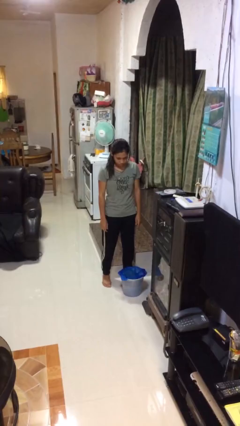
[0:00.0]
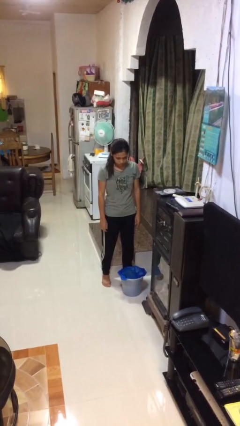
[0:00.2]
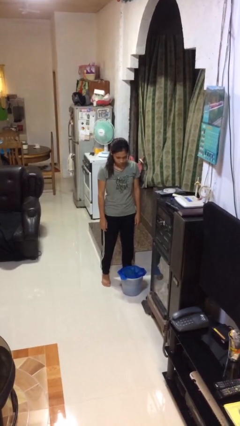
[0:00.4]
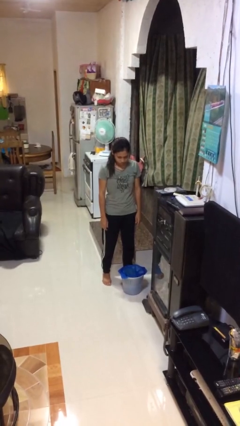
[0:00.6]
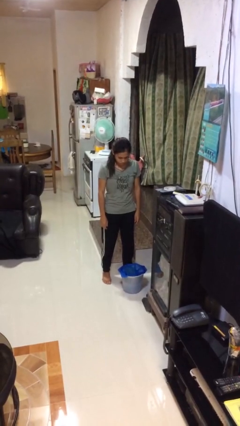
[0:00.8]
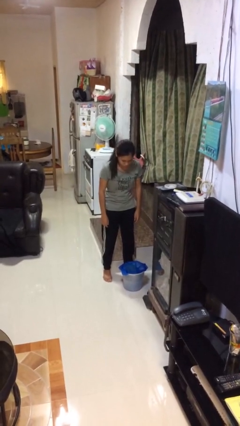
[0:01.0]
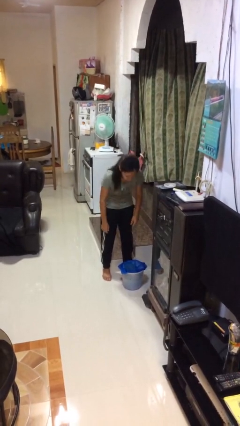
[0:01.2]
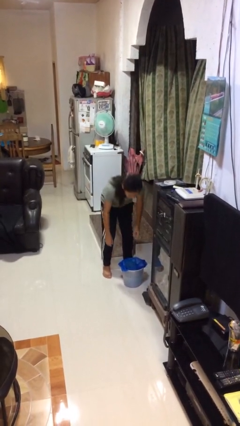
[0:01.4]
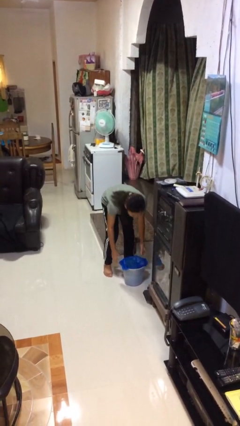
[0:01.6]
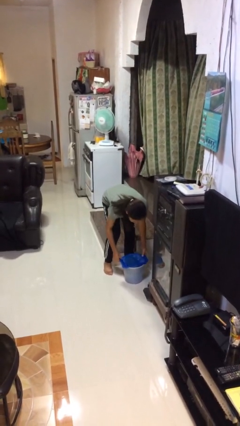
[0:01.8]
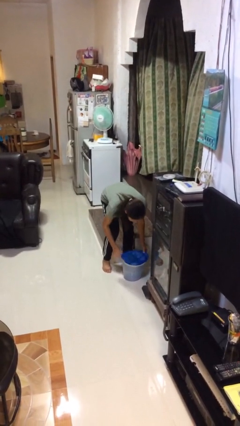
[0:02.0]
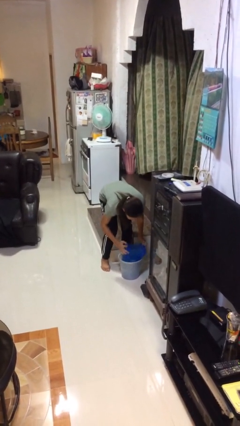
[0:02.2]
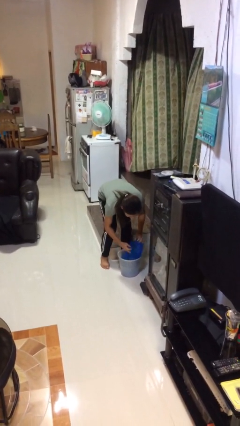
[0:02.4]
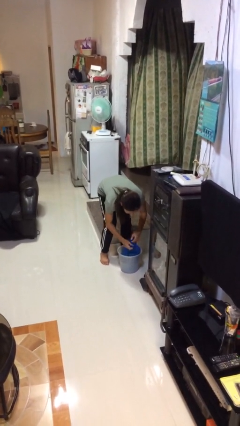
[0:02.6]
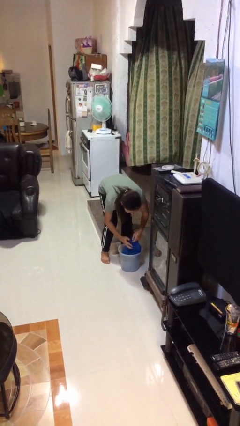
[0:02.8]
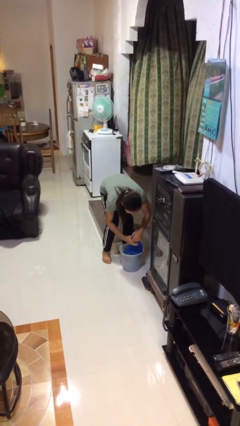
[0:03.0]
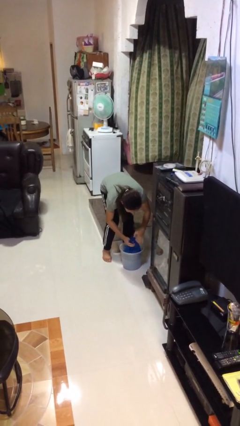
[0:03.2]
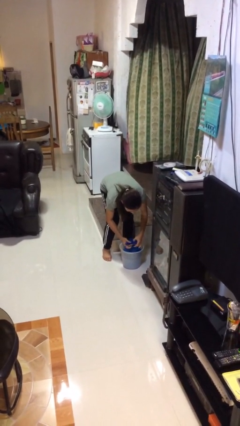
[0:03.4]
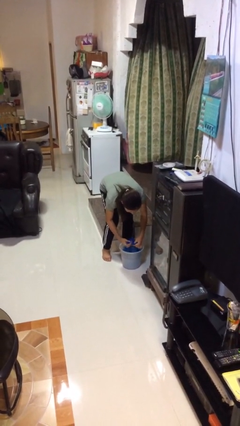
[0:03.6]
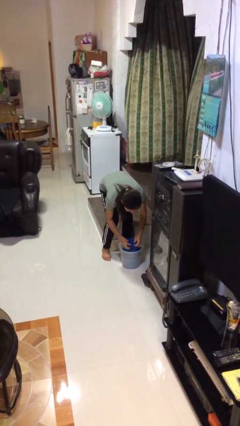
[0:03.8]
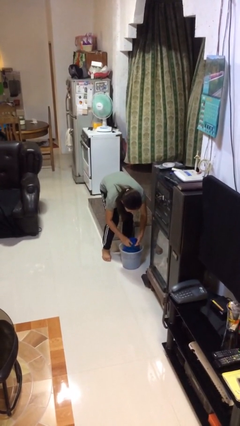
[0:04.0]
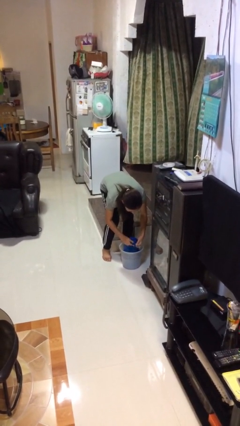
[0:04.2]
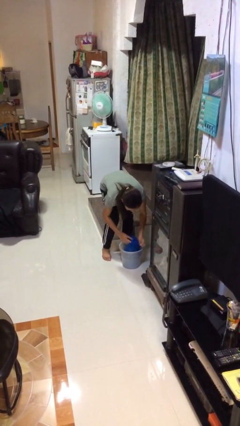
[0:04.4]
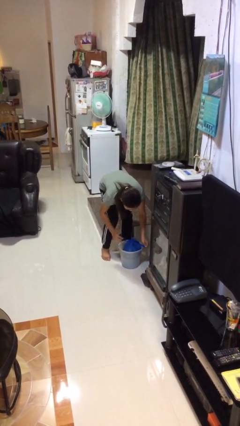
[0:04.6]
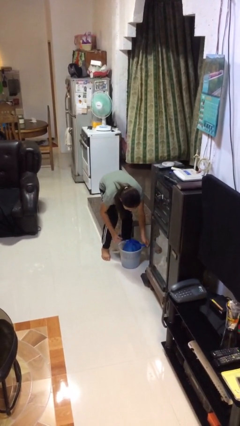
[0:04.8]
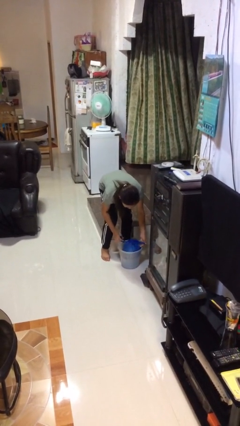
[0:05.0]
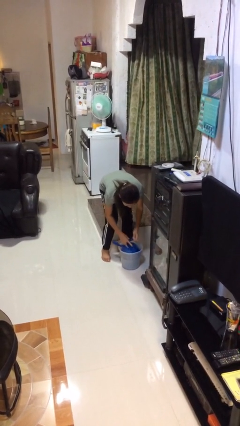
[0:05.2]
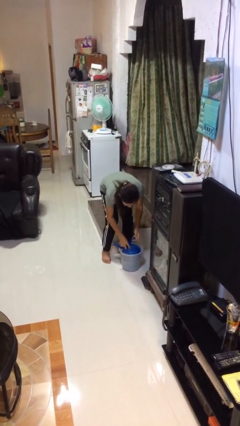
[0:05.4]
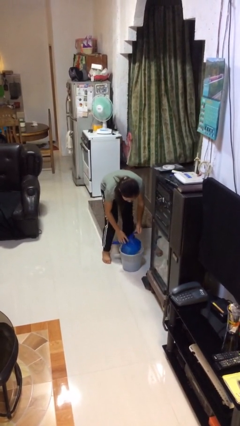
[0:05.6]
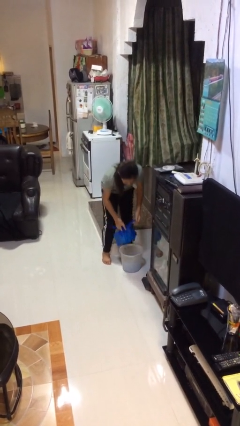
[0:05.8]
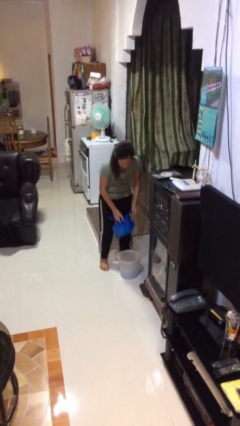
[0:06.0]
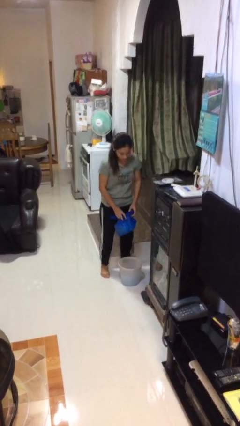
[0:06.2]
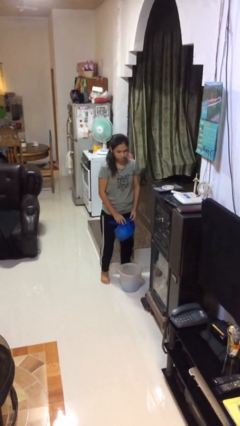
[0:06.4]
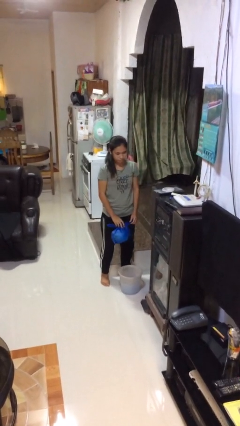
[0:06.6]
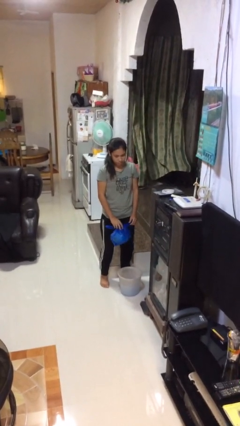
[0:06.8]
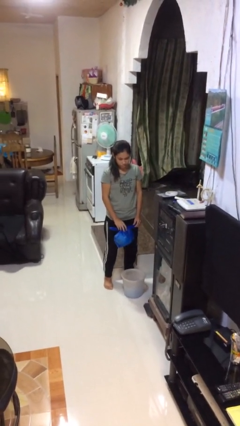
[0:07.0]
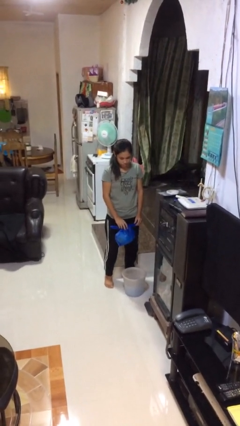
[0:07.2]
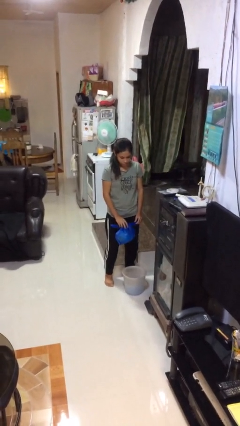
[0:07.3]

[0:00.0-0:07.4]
person removes trashbag from trashcan

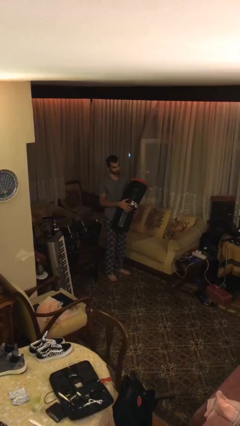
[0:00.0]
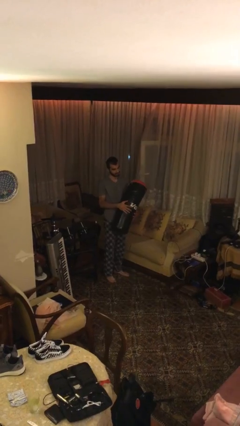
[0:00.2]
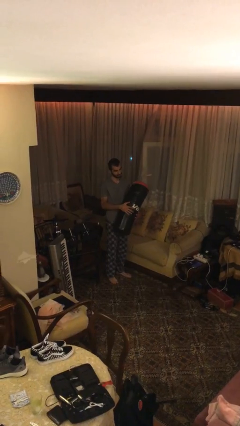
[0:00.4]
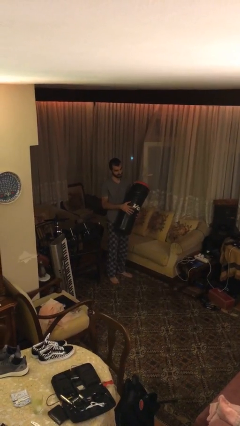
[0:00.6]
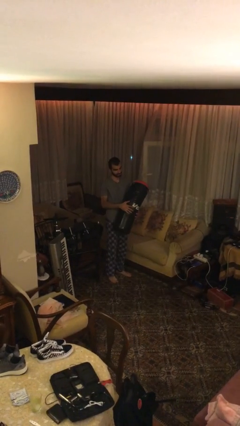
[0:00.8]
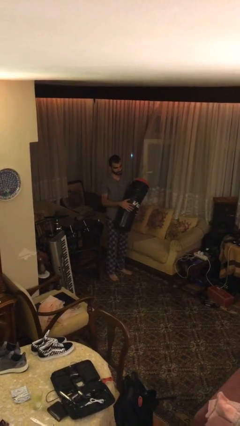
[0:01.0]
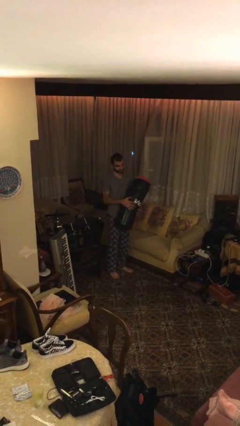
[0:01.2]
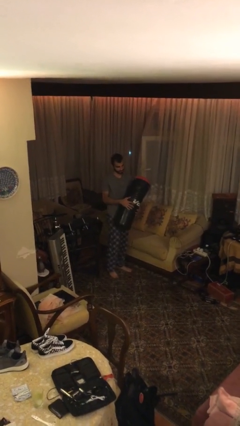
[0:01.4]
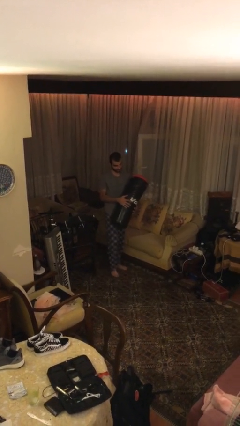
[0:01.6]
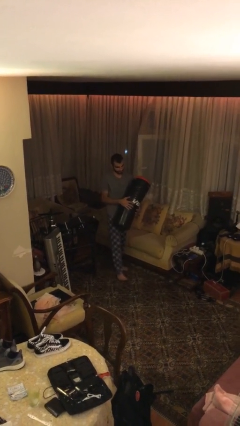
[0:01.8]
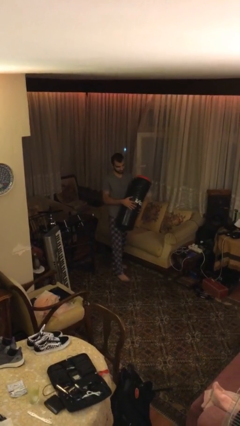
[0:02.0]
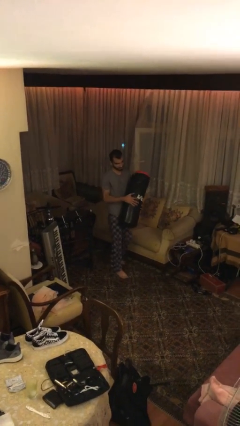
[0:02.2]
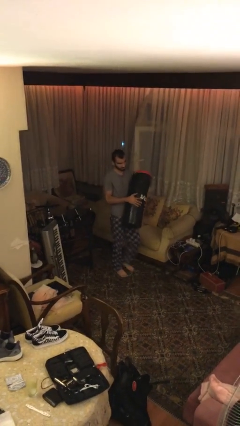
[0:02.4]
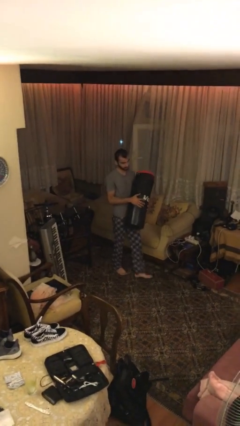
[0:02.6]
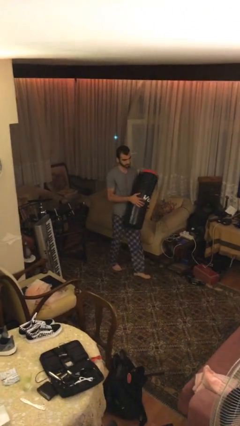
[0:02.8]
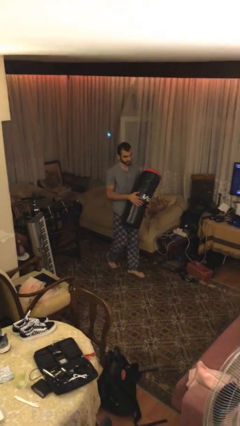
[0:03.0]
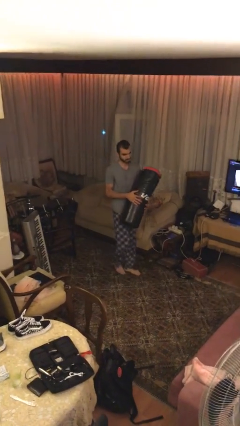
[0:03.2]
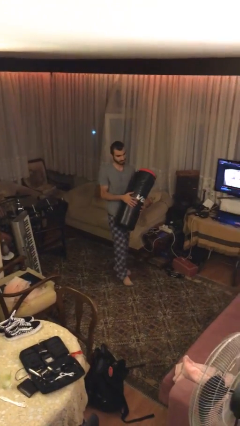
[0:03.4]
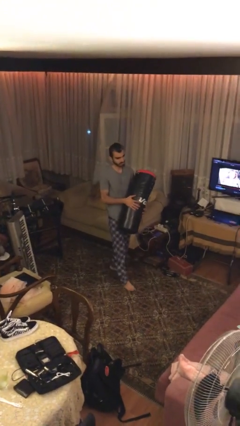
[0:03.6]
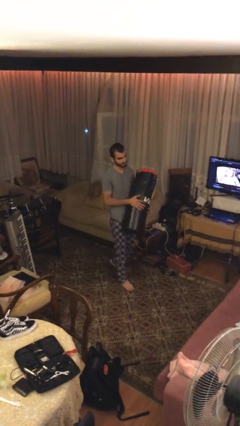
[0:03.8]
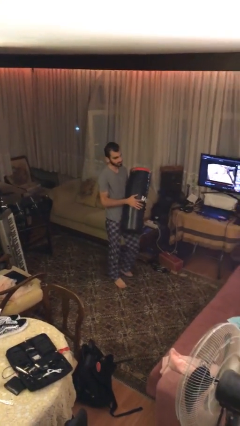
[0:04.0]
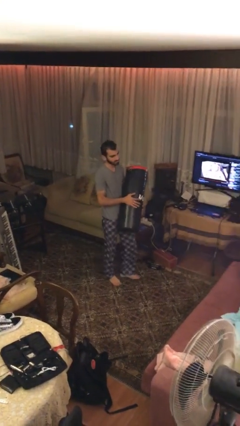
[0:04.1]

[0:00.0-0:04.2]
person carries heavy object

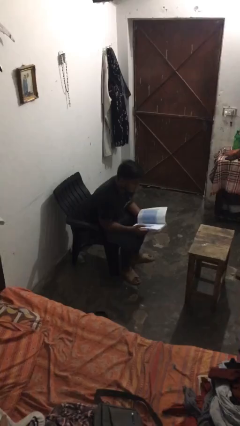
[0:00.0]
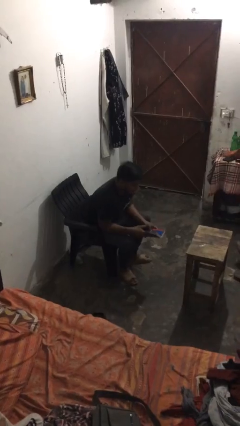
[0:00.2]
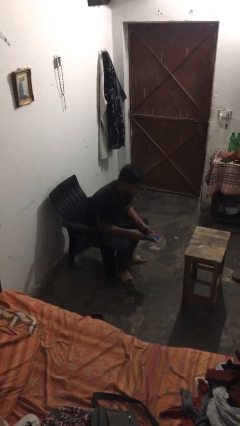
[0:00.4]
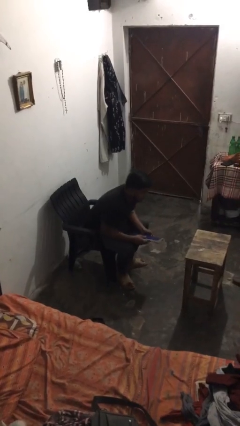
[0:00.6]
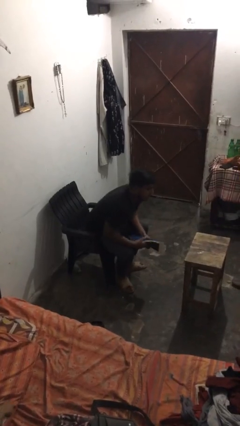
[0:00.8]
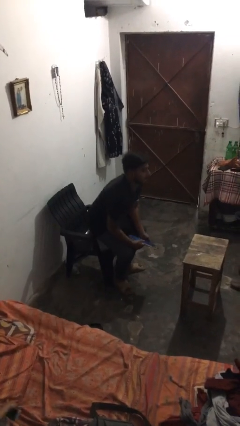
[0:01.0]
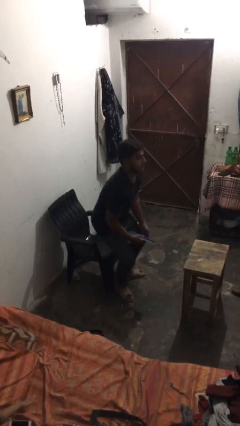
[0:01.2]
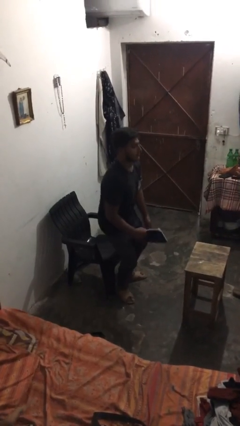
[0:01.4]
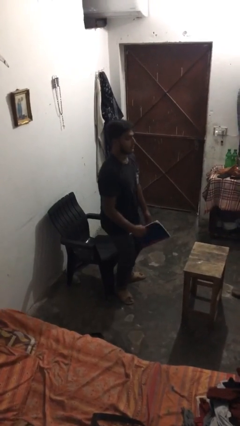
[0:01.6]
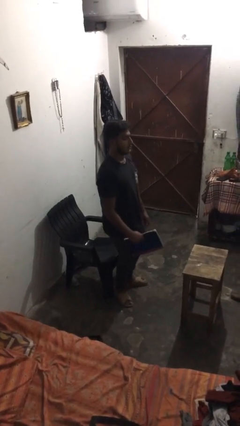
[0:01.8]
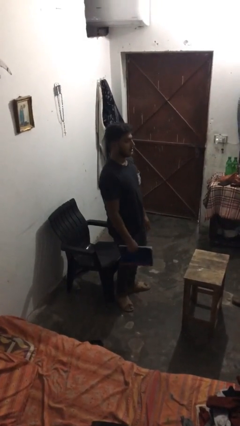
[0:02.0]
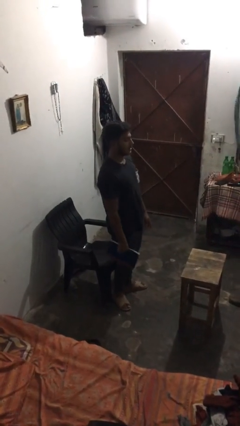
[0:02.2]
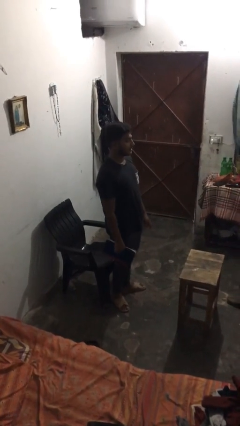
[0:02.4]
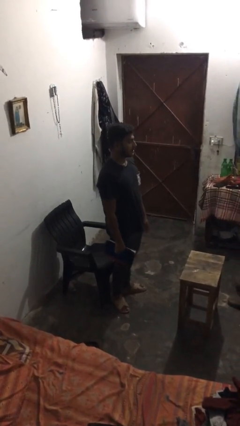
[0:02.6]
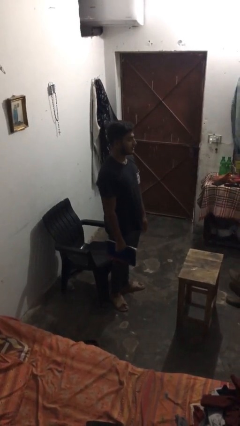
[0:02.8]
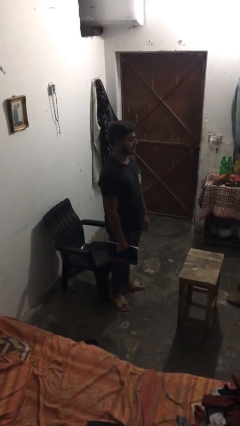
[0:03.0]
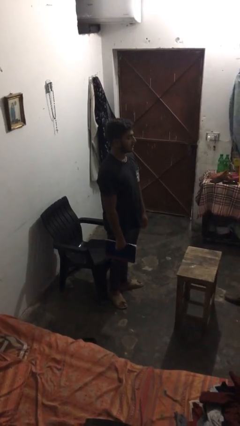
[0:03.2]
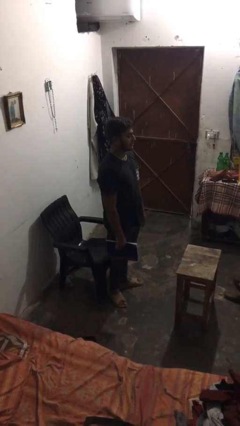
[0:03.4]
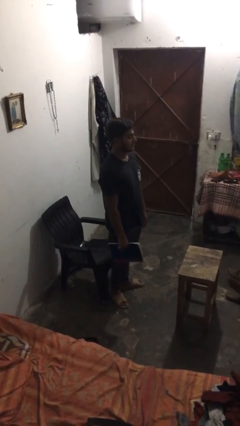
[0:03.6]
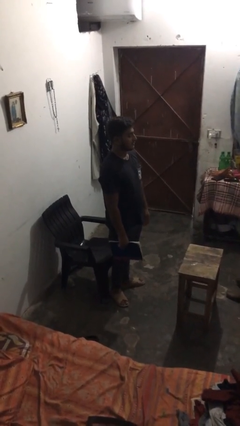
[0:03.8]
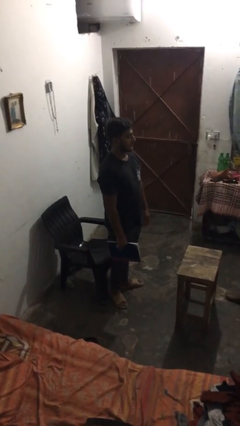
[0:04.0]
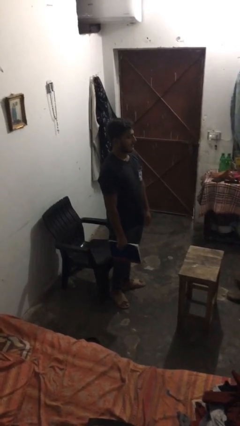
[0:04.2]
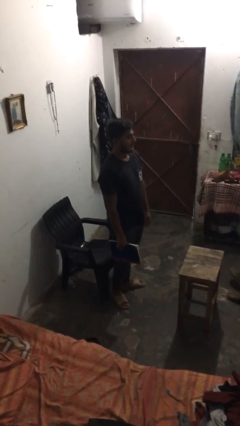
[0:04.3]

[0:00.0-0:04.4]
person stands up

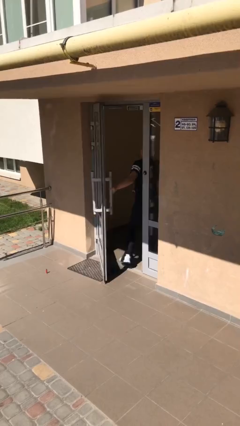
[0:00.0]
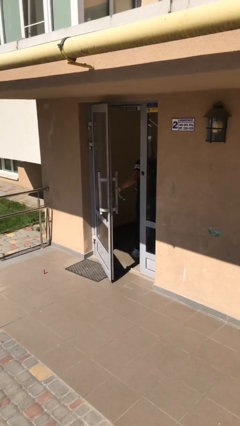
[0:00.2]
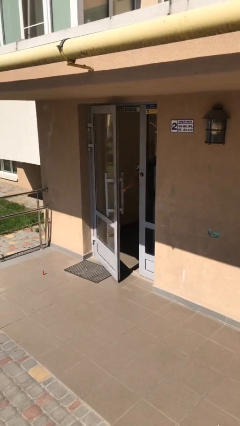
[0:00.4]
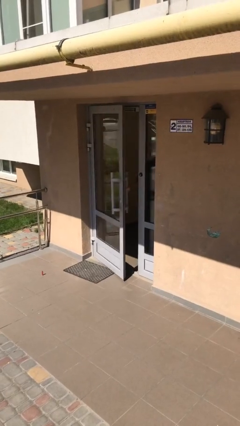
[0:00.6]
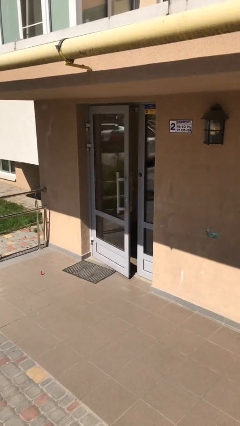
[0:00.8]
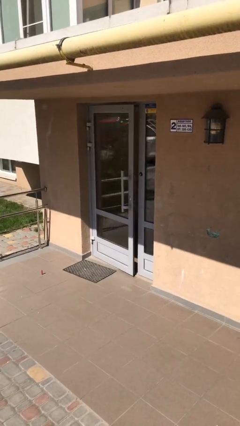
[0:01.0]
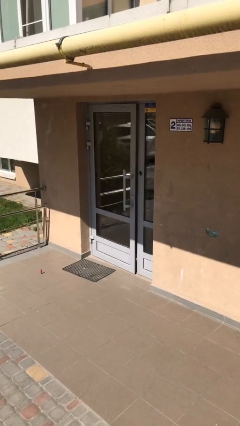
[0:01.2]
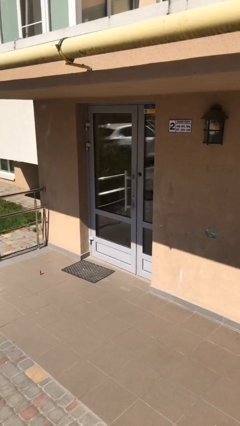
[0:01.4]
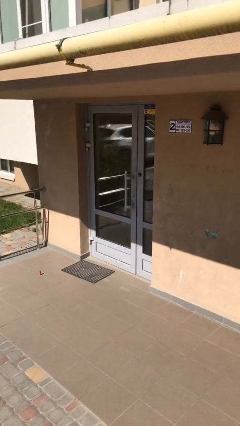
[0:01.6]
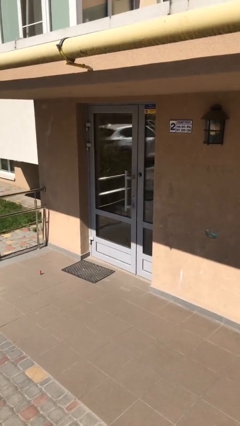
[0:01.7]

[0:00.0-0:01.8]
person closes facility door

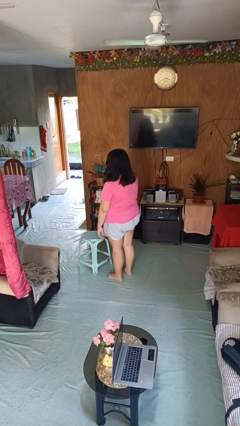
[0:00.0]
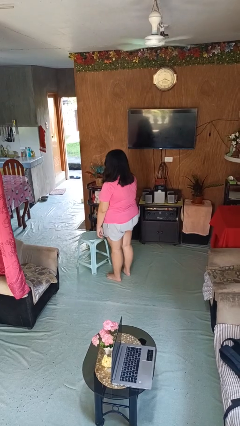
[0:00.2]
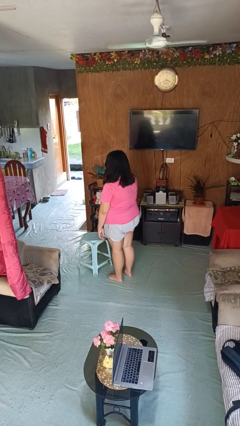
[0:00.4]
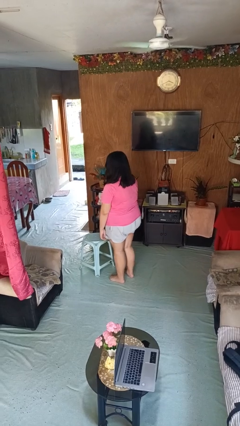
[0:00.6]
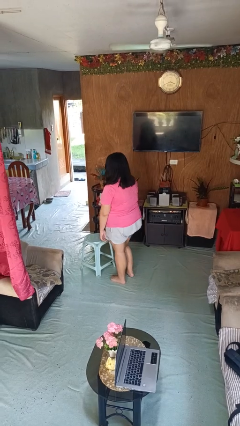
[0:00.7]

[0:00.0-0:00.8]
person knocks over furniture
